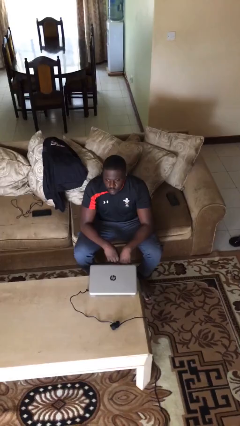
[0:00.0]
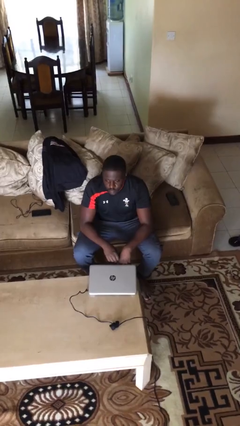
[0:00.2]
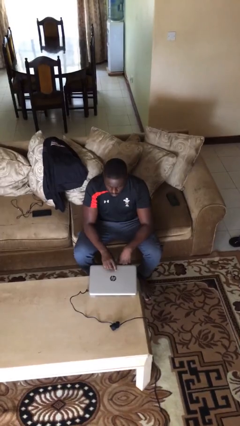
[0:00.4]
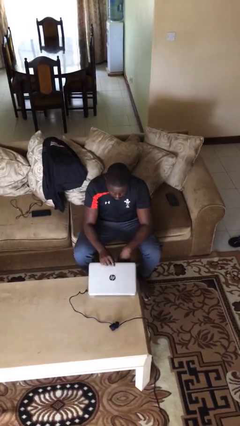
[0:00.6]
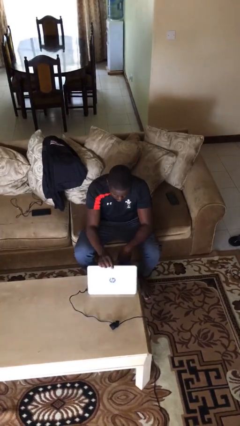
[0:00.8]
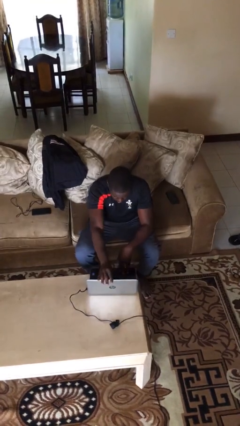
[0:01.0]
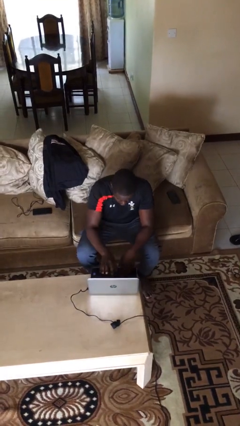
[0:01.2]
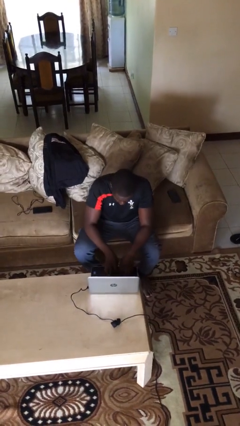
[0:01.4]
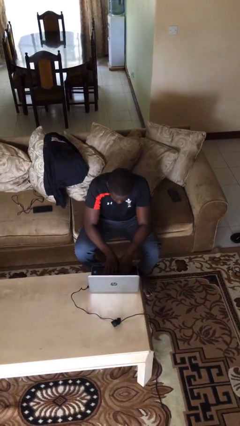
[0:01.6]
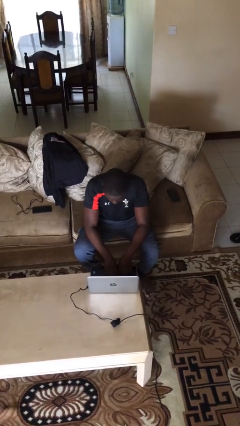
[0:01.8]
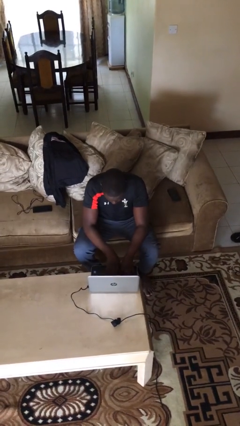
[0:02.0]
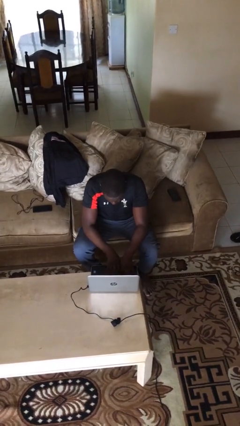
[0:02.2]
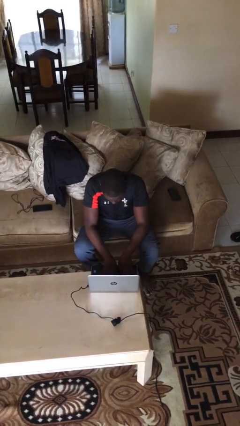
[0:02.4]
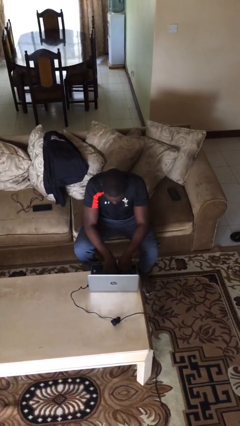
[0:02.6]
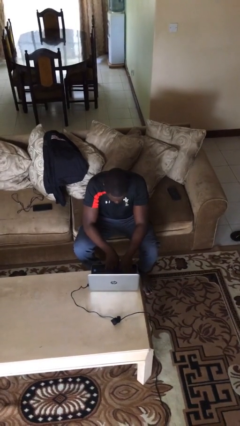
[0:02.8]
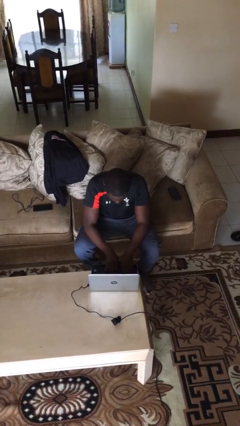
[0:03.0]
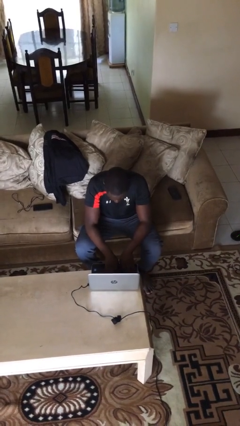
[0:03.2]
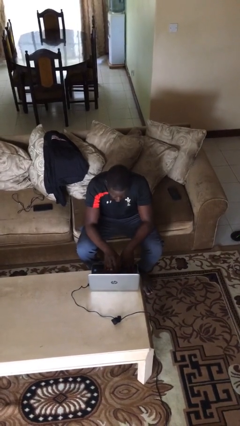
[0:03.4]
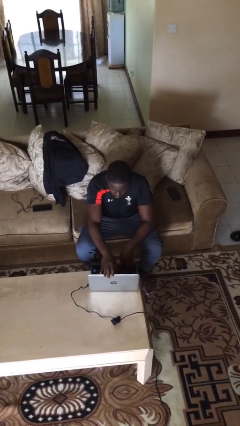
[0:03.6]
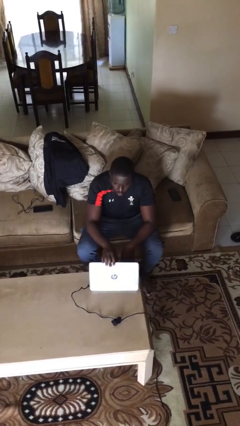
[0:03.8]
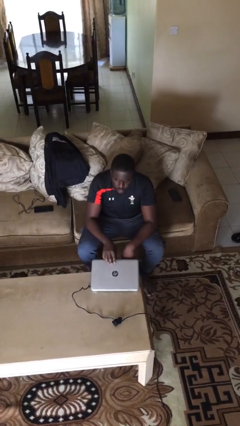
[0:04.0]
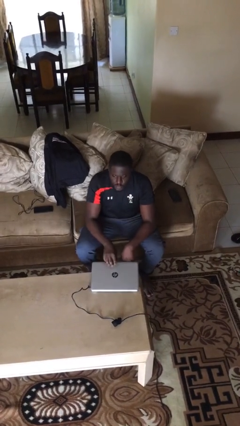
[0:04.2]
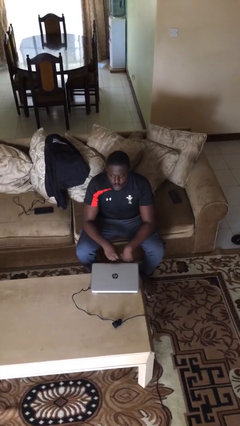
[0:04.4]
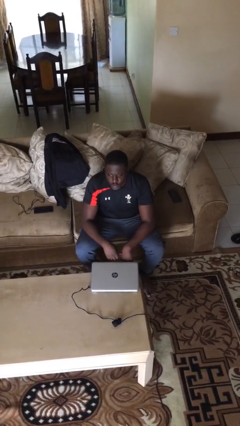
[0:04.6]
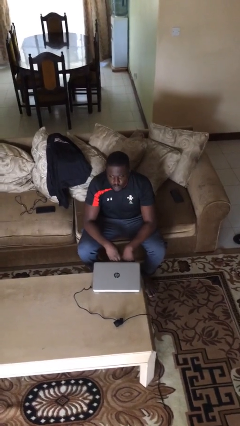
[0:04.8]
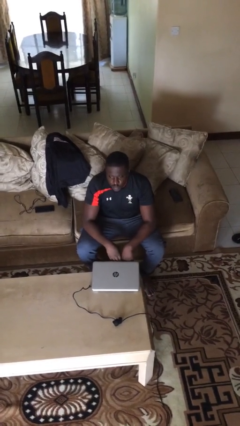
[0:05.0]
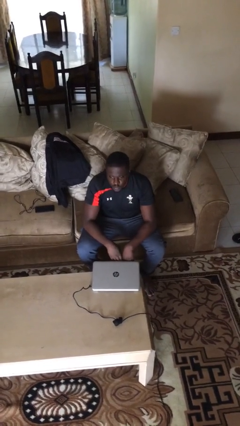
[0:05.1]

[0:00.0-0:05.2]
person interacts with laptop

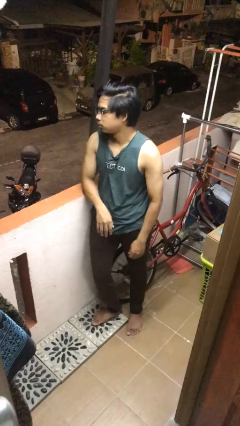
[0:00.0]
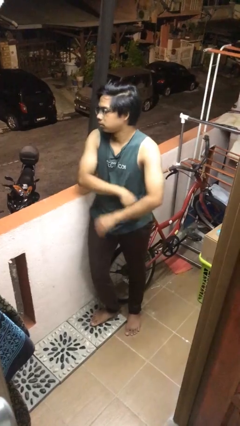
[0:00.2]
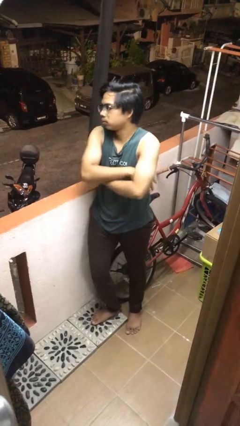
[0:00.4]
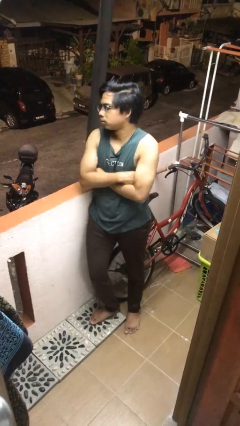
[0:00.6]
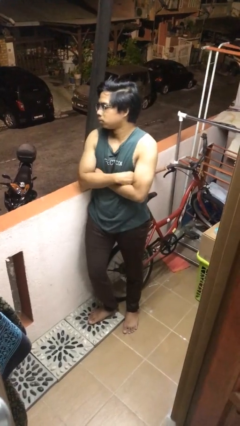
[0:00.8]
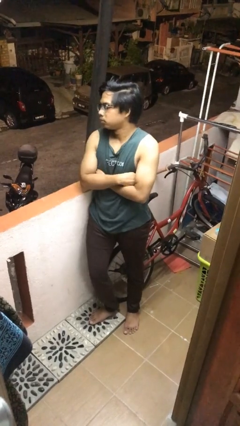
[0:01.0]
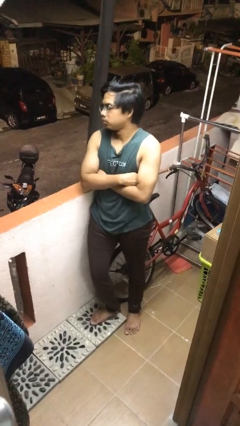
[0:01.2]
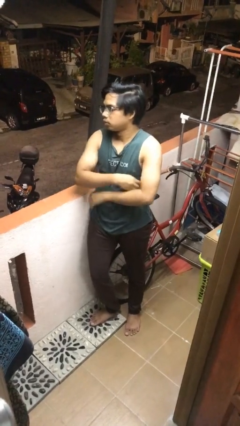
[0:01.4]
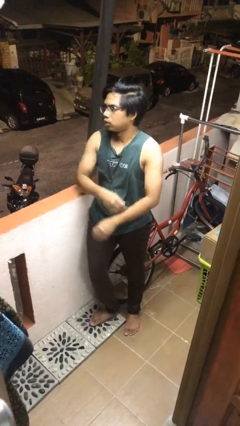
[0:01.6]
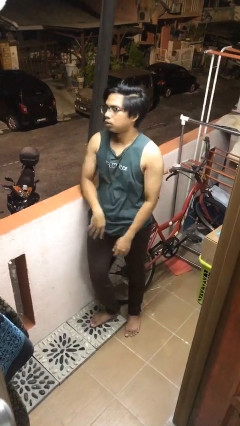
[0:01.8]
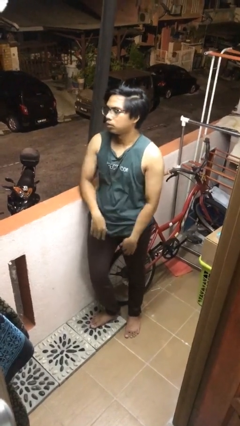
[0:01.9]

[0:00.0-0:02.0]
person crosses arms

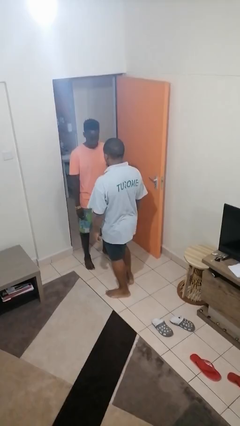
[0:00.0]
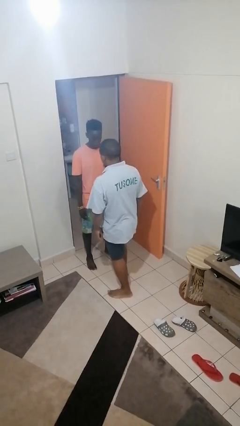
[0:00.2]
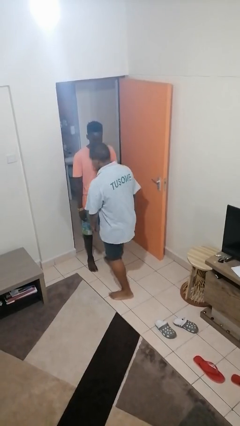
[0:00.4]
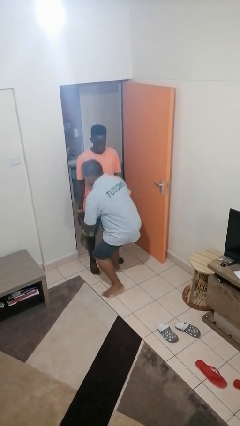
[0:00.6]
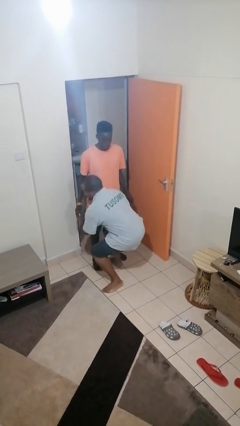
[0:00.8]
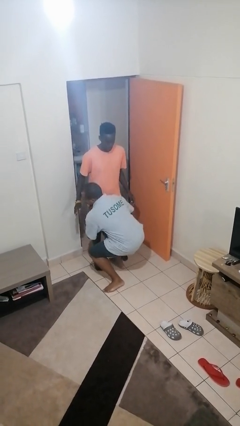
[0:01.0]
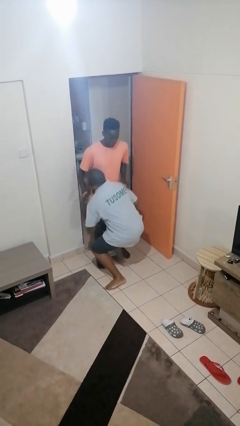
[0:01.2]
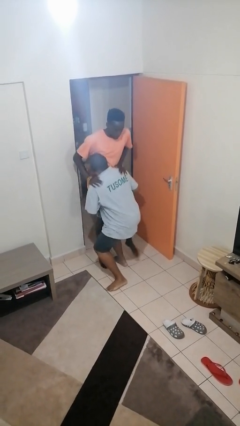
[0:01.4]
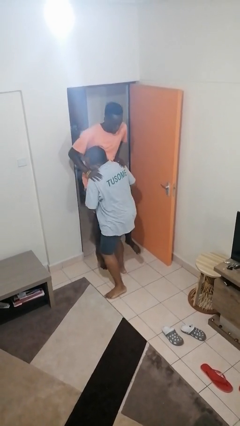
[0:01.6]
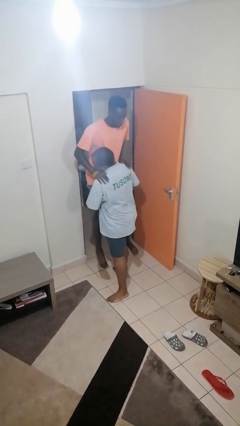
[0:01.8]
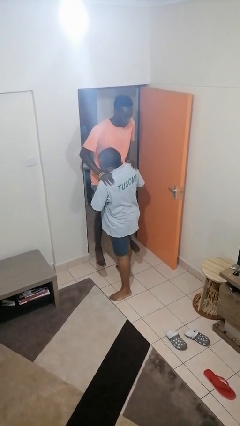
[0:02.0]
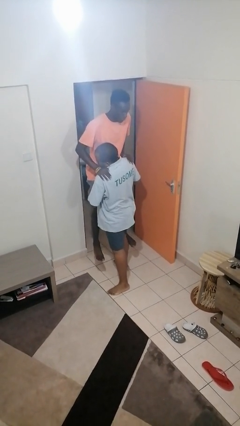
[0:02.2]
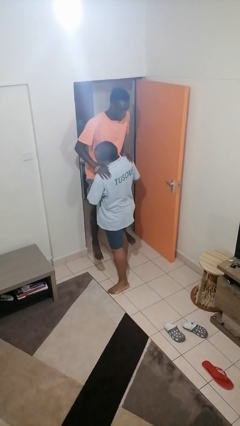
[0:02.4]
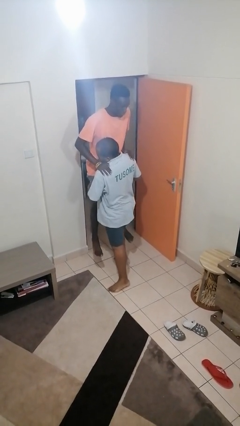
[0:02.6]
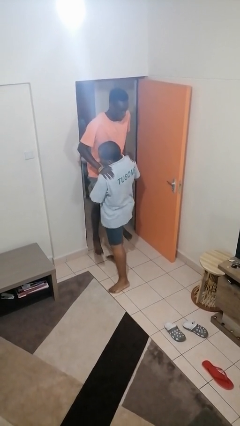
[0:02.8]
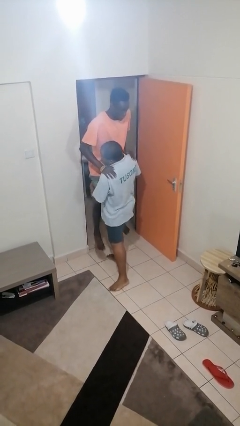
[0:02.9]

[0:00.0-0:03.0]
person picks up person

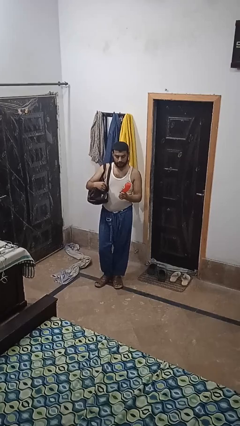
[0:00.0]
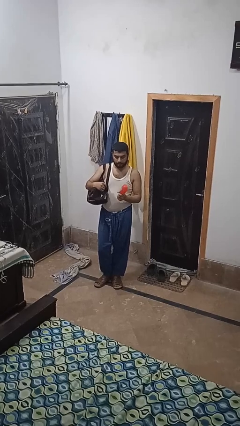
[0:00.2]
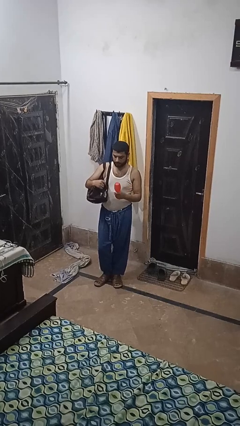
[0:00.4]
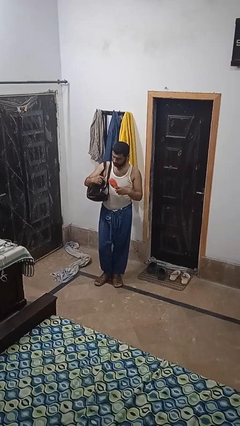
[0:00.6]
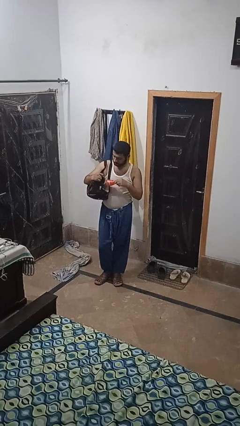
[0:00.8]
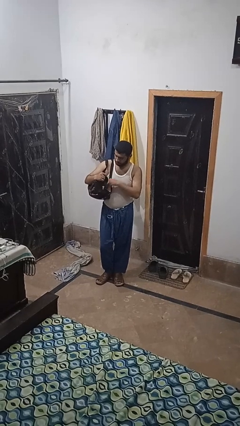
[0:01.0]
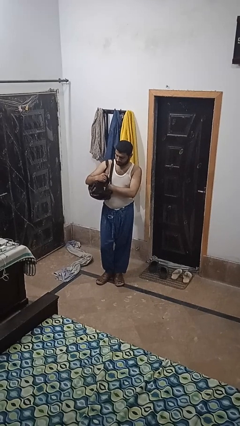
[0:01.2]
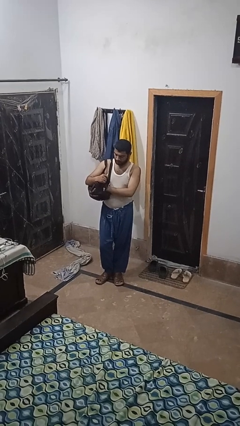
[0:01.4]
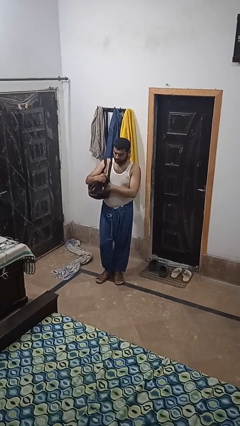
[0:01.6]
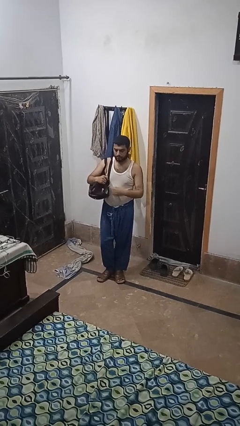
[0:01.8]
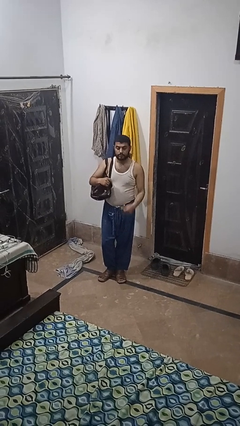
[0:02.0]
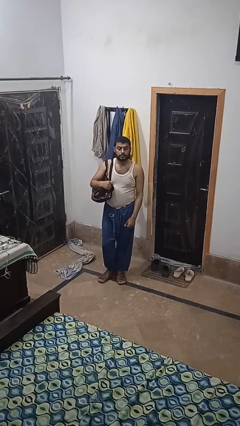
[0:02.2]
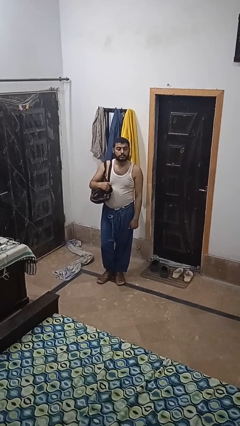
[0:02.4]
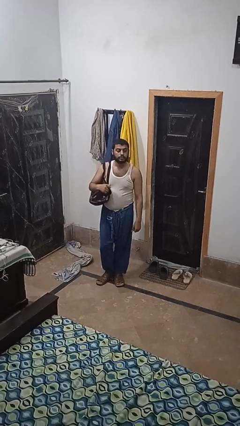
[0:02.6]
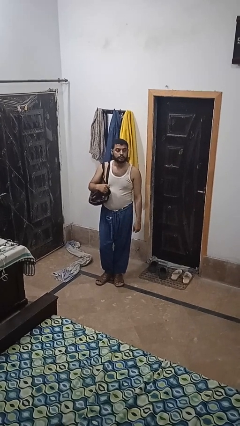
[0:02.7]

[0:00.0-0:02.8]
person puts object into purse

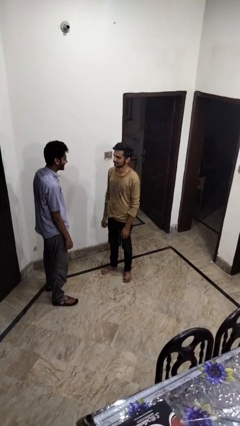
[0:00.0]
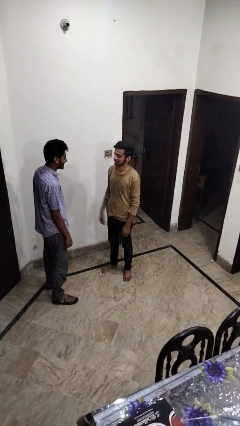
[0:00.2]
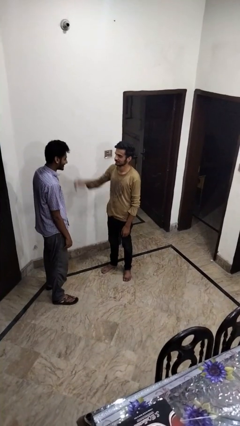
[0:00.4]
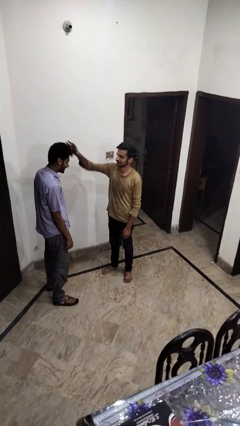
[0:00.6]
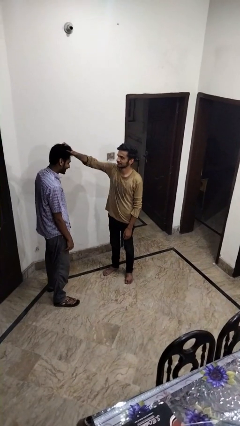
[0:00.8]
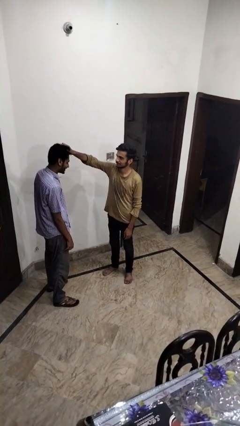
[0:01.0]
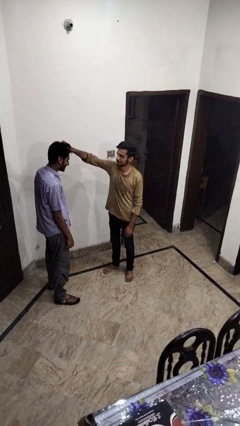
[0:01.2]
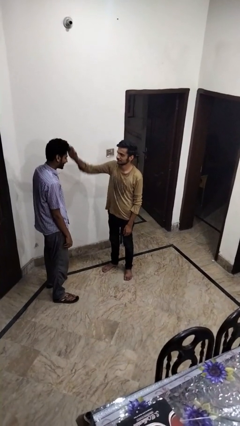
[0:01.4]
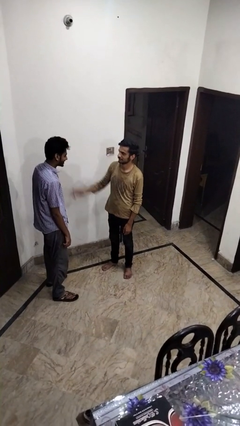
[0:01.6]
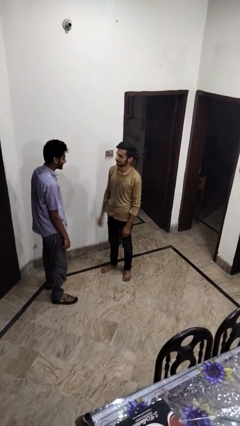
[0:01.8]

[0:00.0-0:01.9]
person grabs person by hair

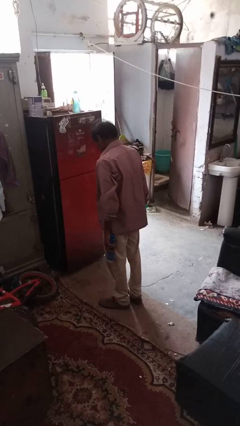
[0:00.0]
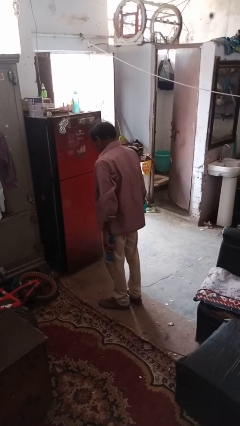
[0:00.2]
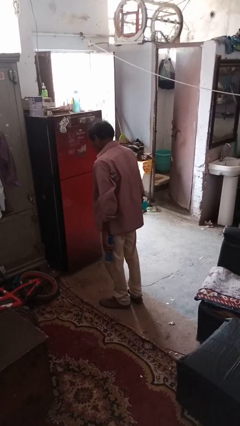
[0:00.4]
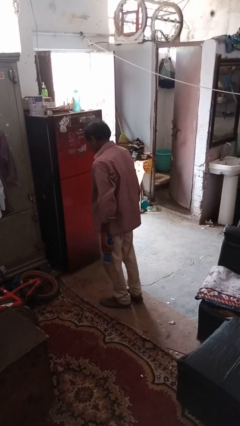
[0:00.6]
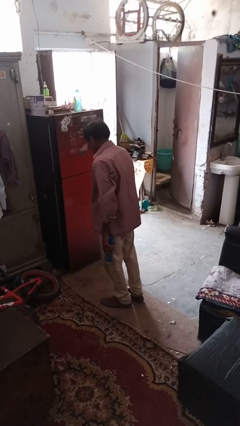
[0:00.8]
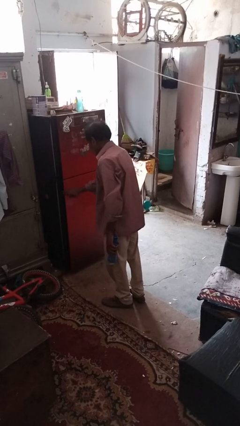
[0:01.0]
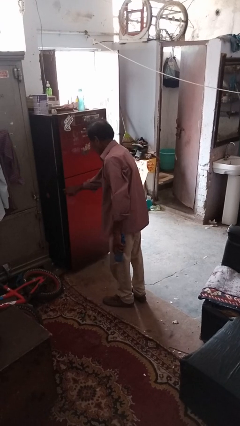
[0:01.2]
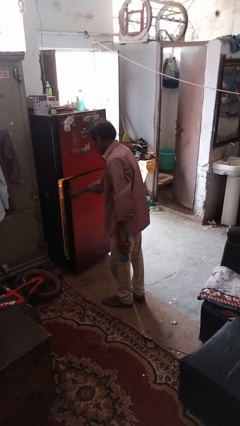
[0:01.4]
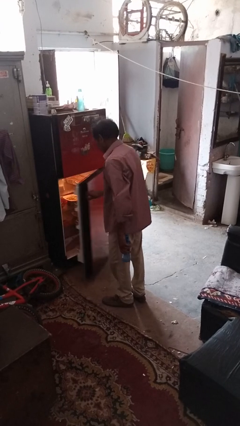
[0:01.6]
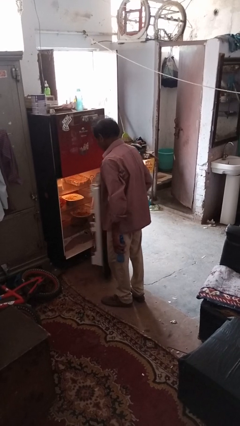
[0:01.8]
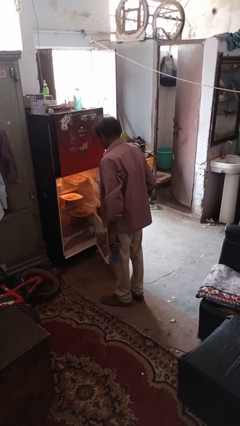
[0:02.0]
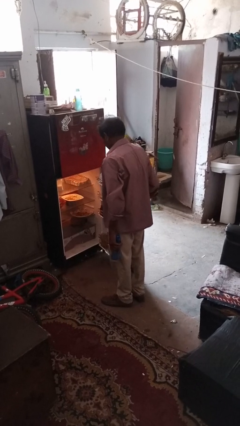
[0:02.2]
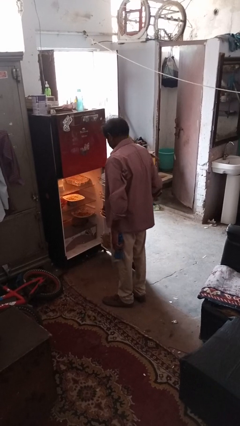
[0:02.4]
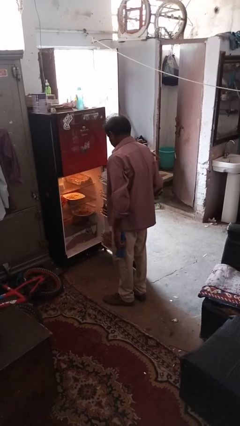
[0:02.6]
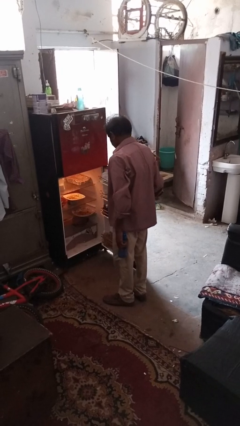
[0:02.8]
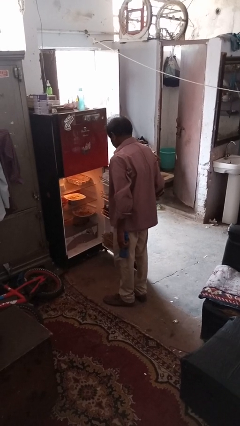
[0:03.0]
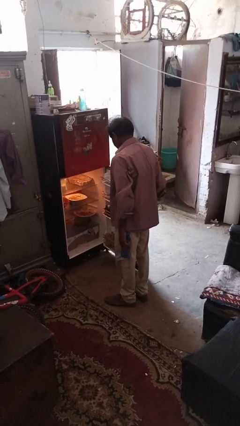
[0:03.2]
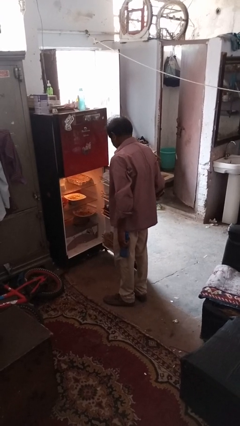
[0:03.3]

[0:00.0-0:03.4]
person opens refrigerator
